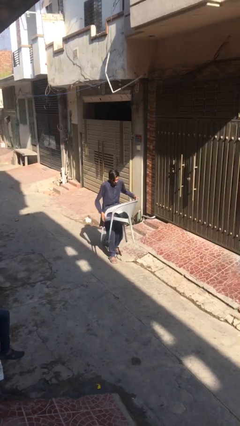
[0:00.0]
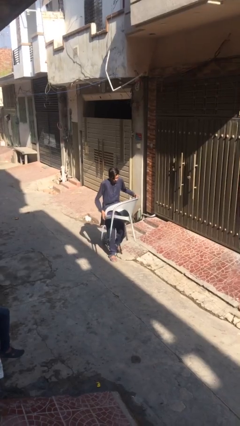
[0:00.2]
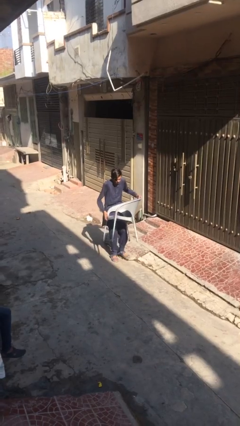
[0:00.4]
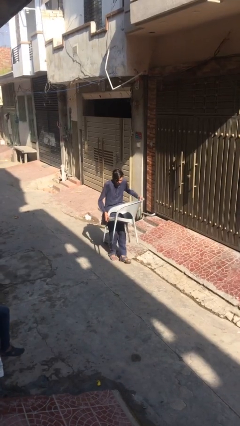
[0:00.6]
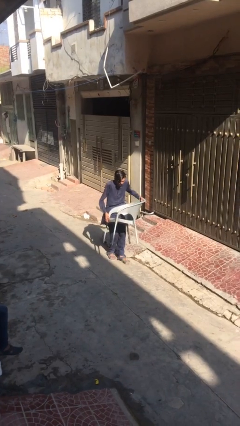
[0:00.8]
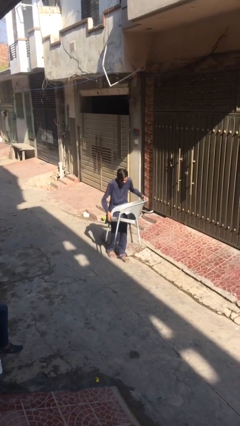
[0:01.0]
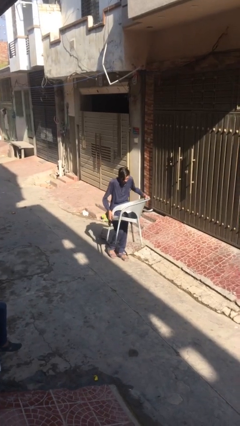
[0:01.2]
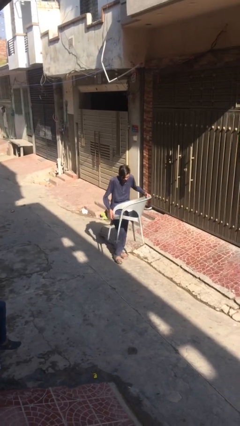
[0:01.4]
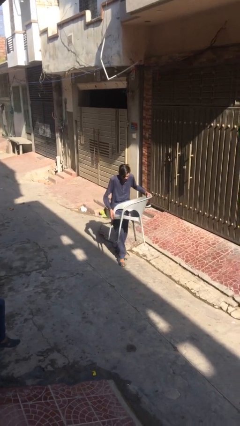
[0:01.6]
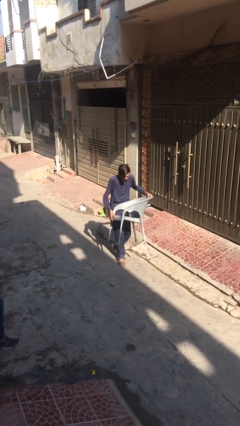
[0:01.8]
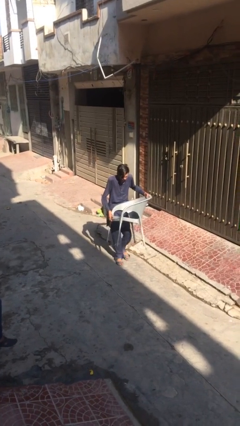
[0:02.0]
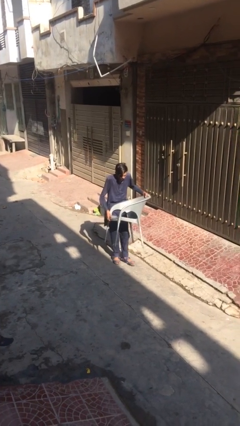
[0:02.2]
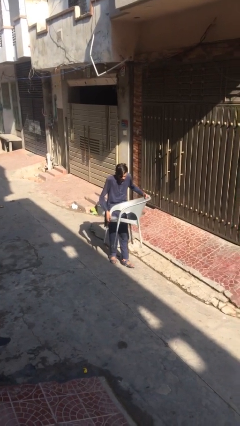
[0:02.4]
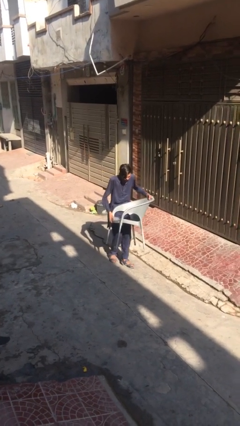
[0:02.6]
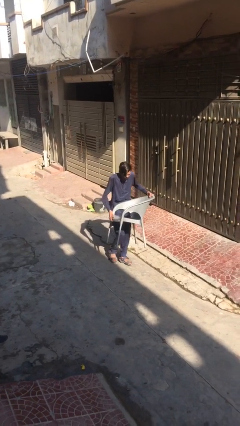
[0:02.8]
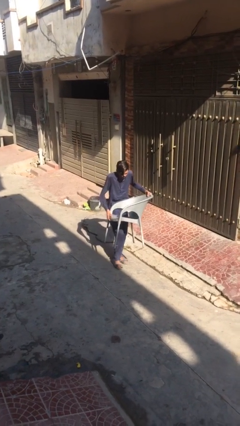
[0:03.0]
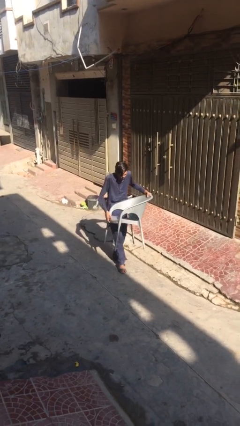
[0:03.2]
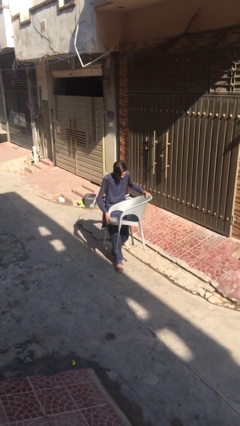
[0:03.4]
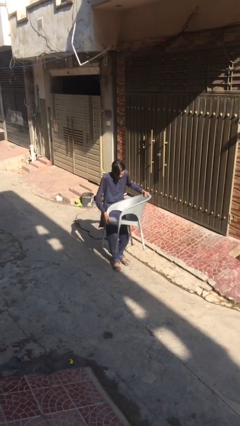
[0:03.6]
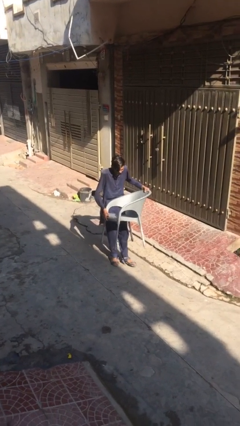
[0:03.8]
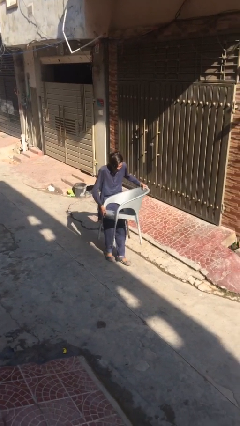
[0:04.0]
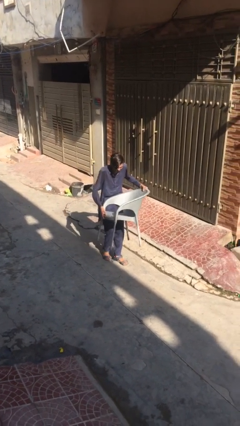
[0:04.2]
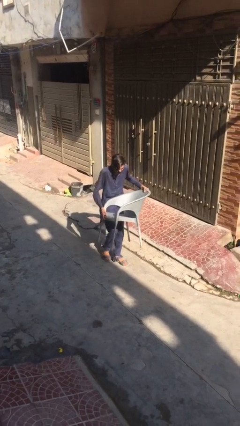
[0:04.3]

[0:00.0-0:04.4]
person carries heavy object

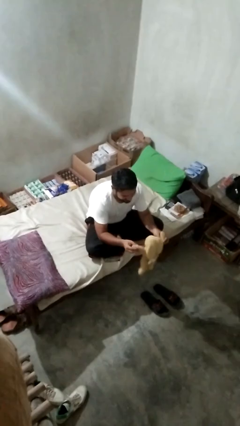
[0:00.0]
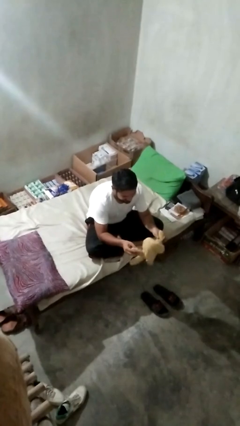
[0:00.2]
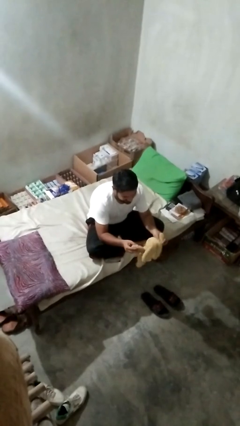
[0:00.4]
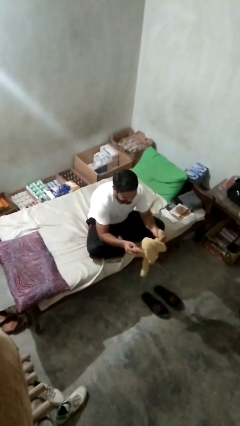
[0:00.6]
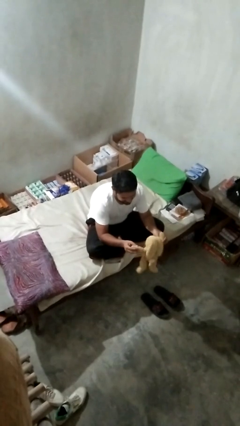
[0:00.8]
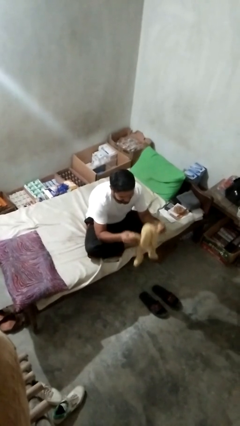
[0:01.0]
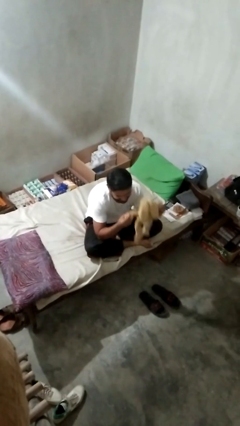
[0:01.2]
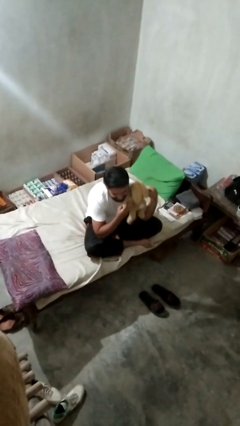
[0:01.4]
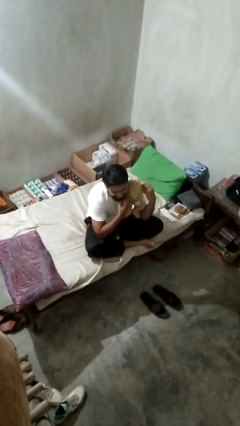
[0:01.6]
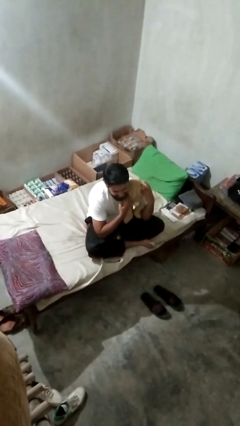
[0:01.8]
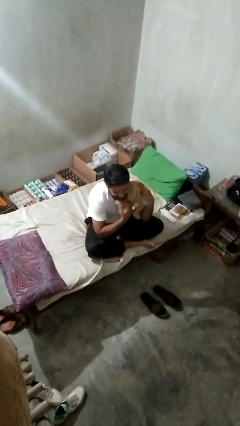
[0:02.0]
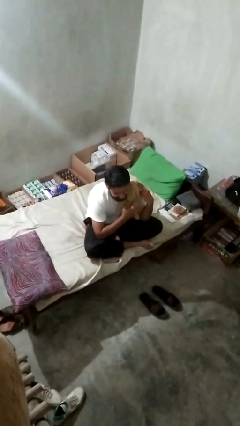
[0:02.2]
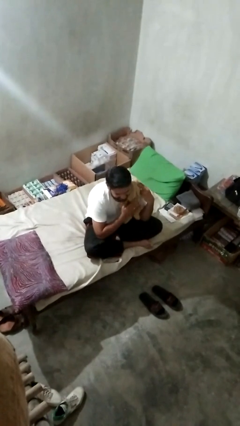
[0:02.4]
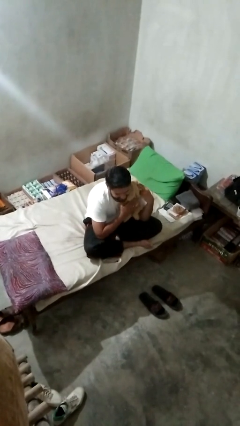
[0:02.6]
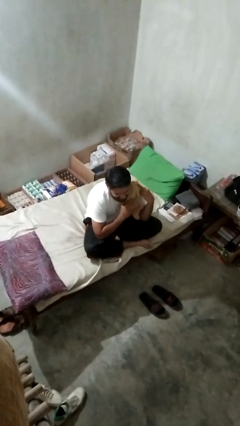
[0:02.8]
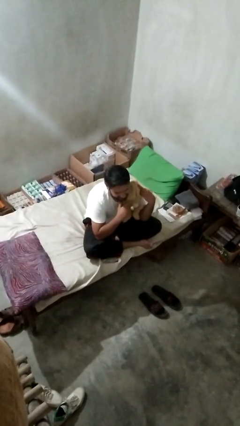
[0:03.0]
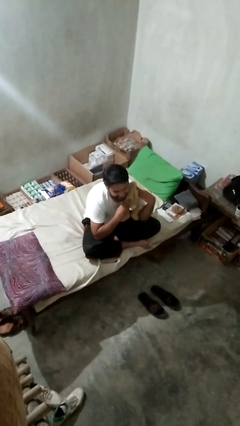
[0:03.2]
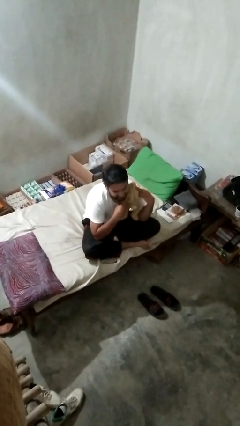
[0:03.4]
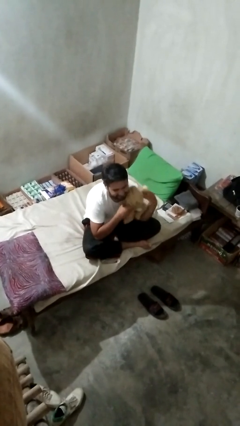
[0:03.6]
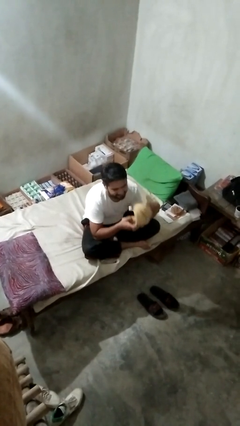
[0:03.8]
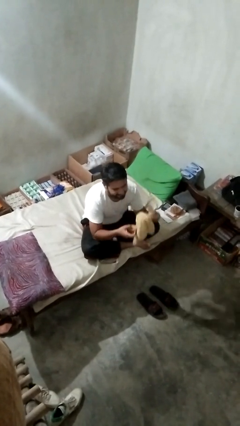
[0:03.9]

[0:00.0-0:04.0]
person hugs stuffed animal

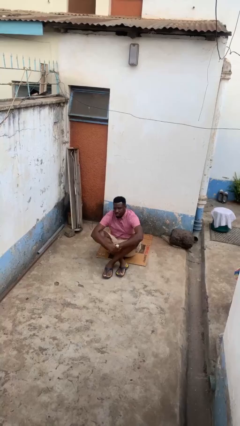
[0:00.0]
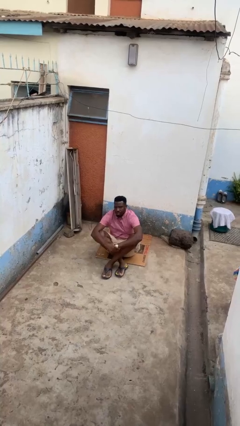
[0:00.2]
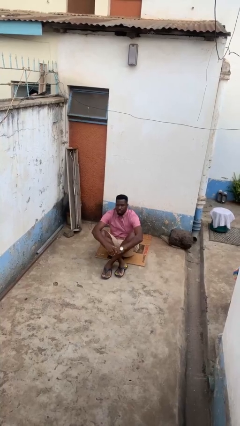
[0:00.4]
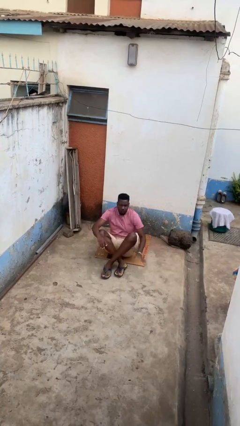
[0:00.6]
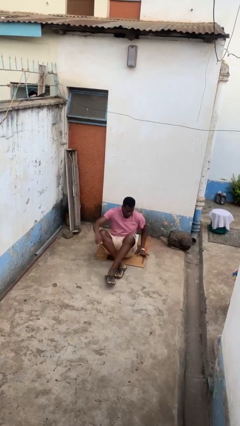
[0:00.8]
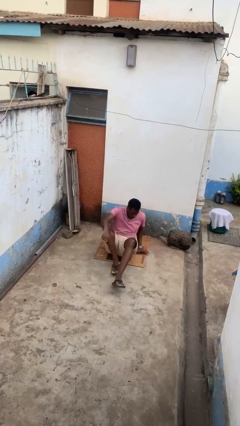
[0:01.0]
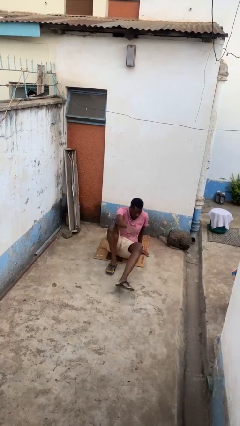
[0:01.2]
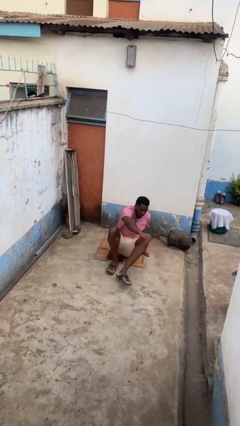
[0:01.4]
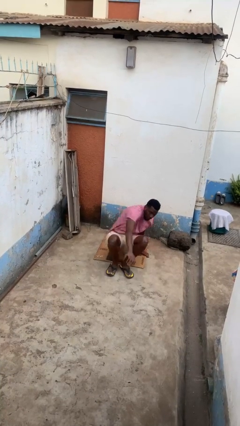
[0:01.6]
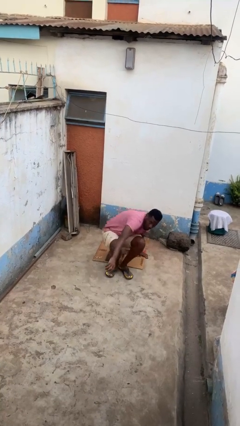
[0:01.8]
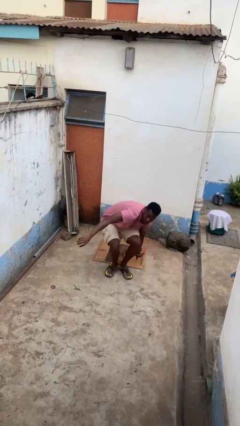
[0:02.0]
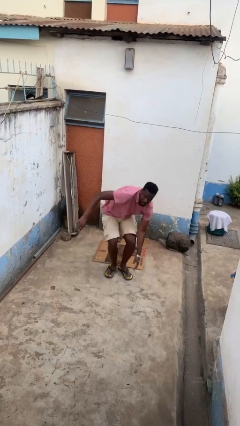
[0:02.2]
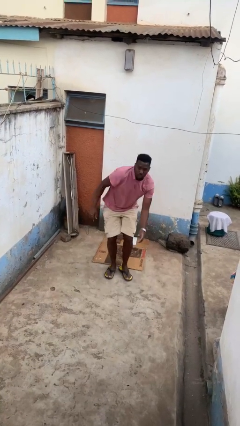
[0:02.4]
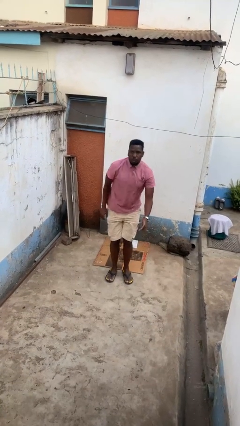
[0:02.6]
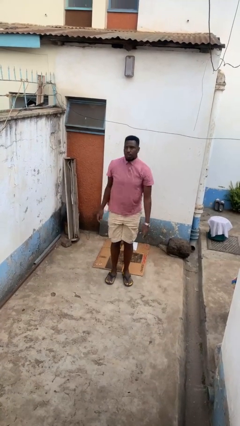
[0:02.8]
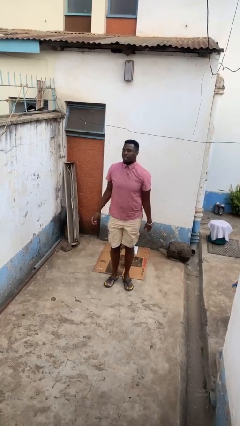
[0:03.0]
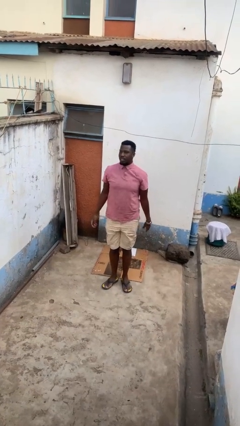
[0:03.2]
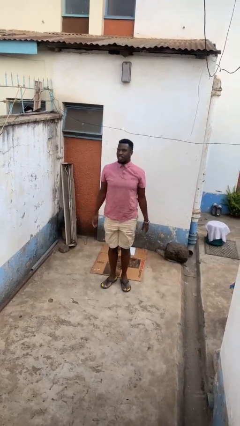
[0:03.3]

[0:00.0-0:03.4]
person stands up from floor

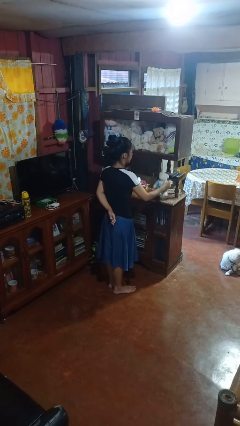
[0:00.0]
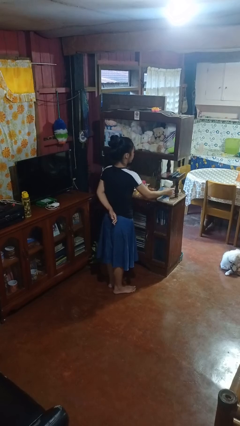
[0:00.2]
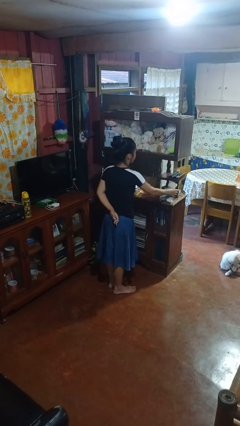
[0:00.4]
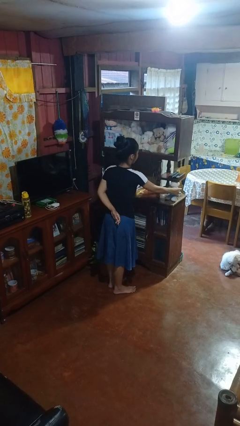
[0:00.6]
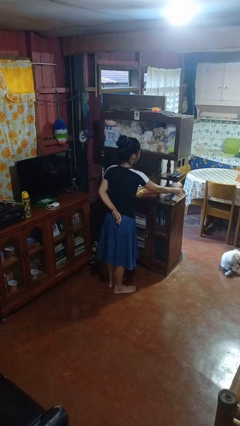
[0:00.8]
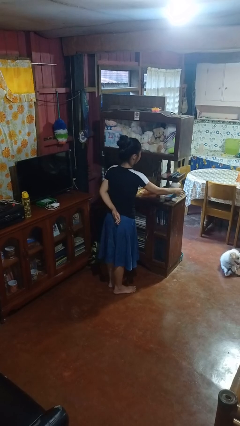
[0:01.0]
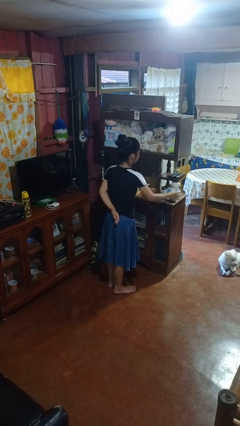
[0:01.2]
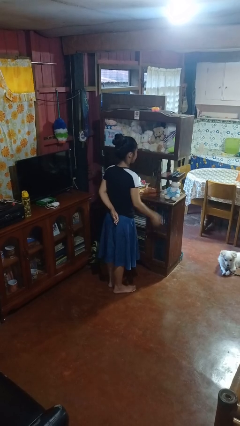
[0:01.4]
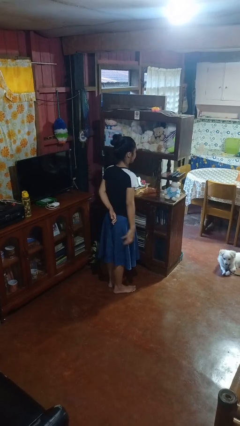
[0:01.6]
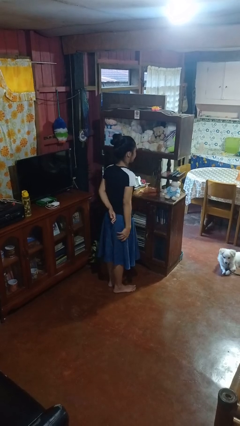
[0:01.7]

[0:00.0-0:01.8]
person puts down object on shelf

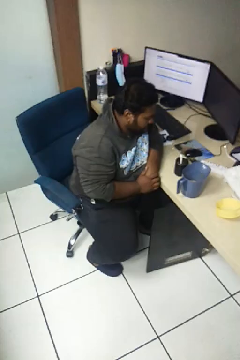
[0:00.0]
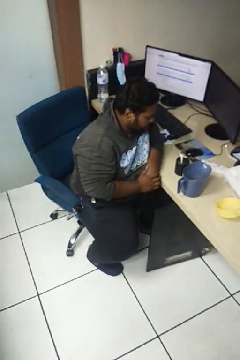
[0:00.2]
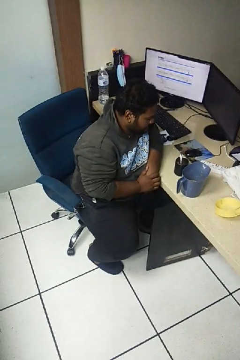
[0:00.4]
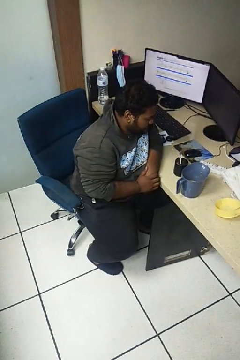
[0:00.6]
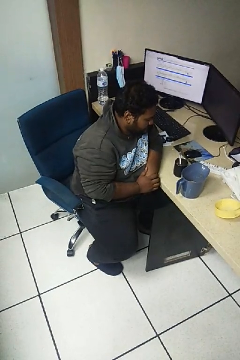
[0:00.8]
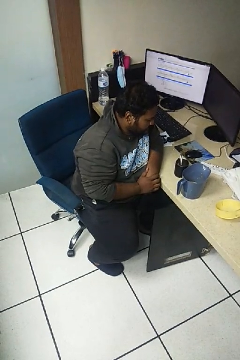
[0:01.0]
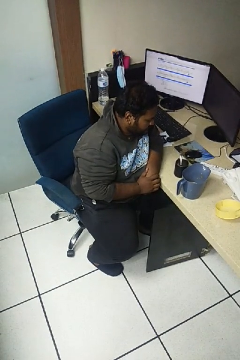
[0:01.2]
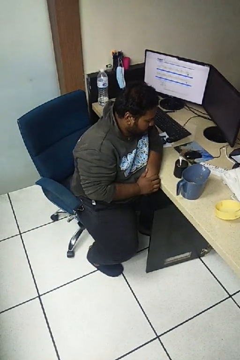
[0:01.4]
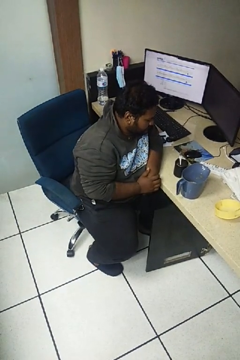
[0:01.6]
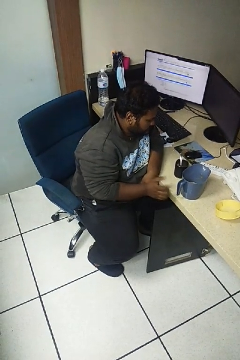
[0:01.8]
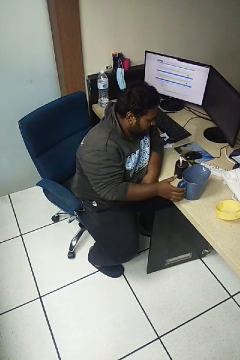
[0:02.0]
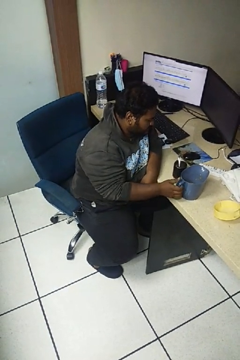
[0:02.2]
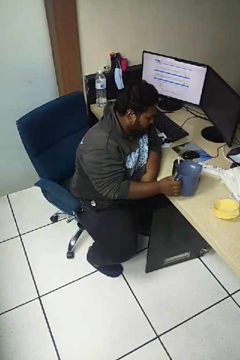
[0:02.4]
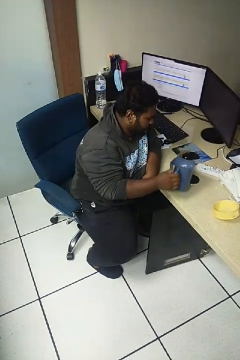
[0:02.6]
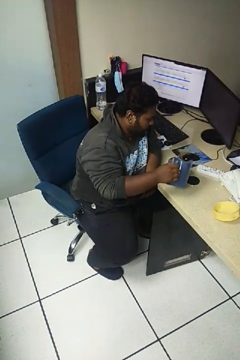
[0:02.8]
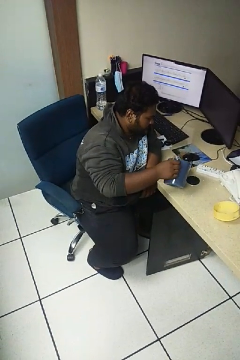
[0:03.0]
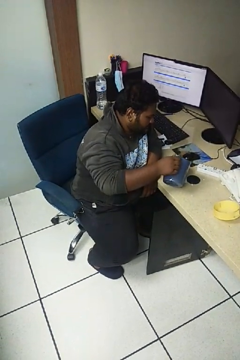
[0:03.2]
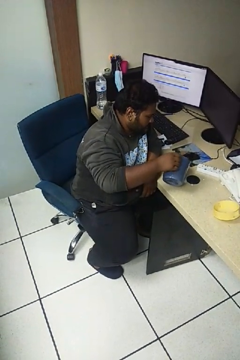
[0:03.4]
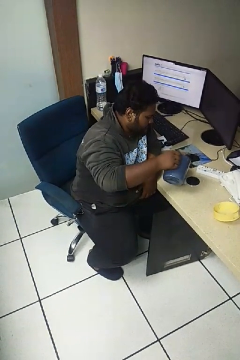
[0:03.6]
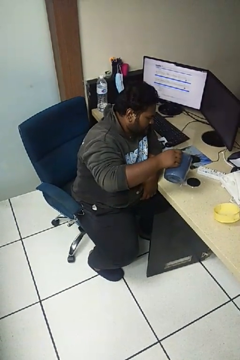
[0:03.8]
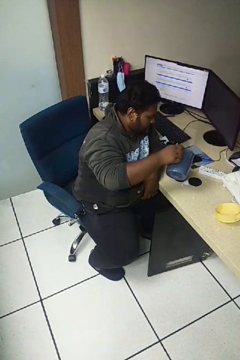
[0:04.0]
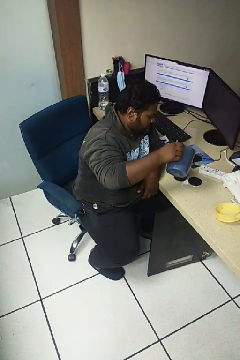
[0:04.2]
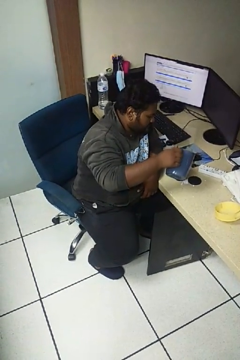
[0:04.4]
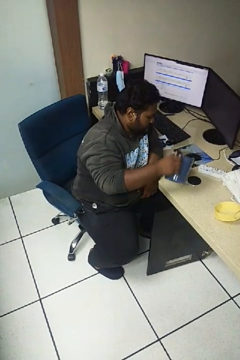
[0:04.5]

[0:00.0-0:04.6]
person pours coffee into mug
